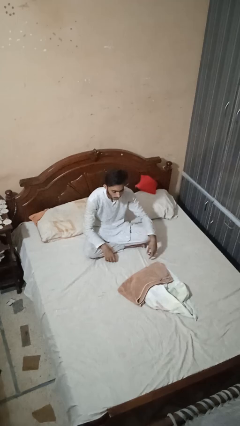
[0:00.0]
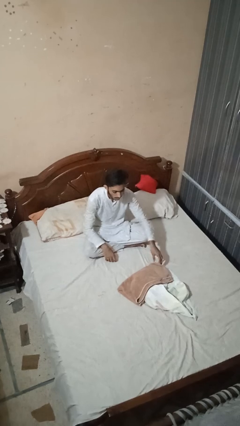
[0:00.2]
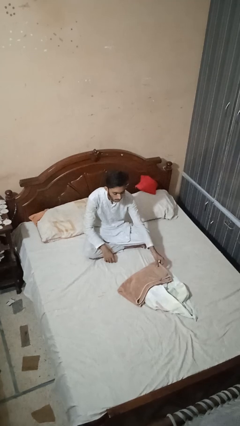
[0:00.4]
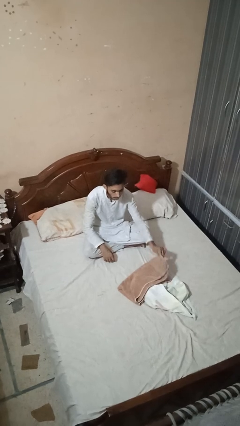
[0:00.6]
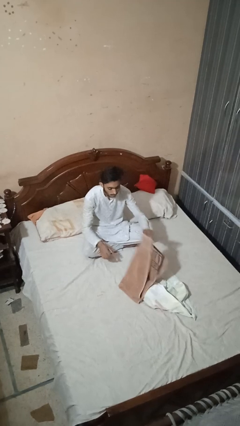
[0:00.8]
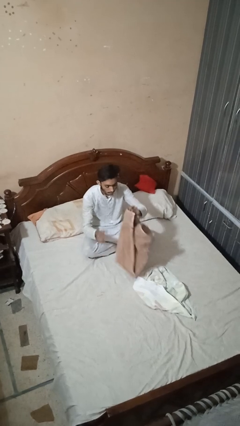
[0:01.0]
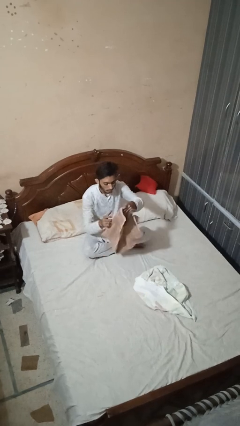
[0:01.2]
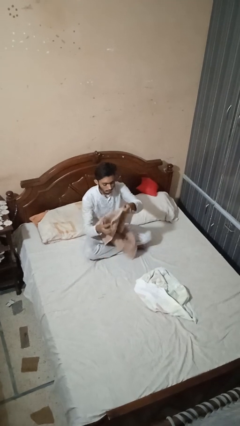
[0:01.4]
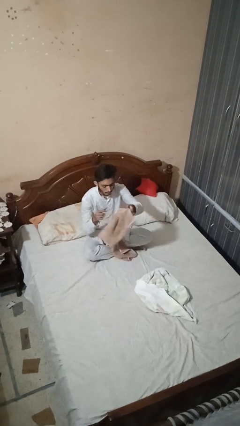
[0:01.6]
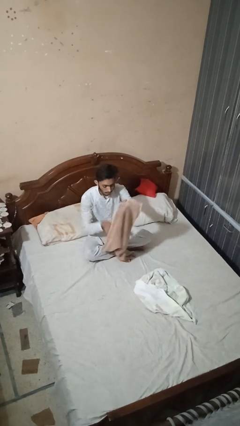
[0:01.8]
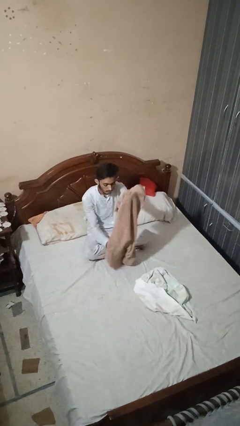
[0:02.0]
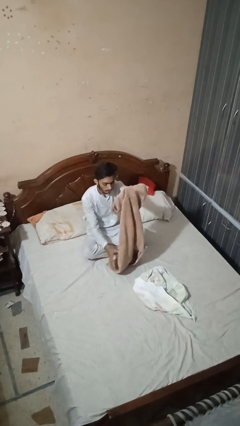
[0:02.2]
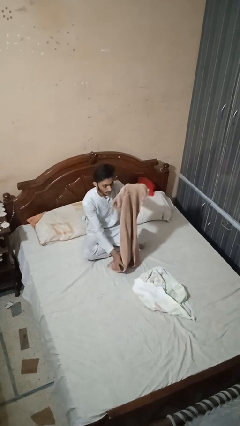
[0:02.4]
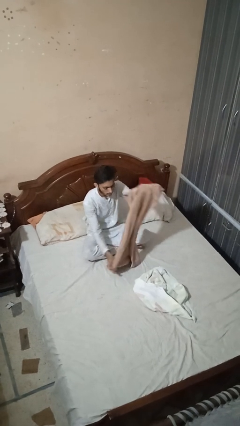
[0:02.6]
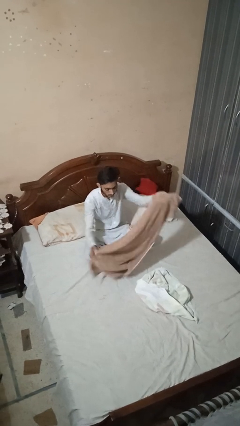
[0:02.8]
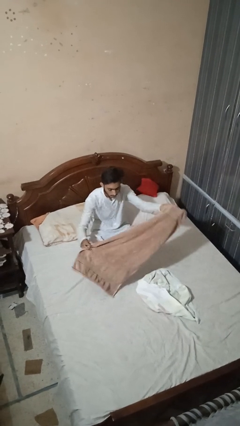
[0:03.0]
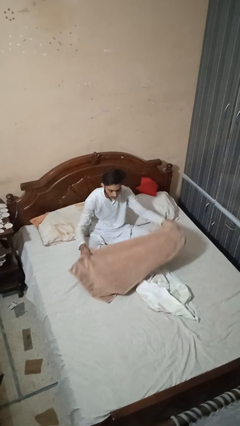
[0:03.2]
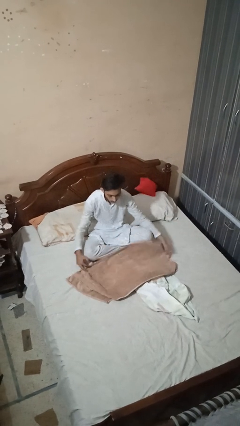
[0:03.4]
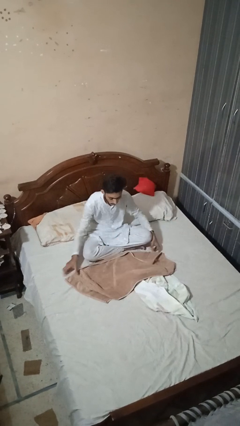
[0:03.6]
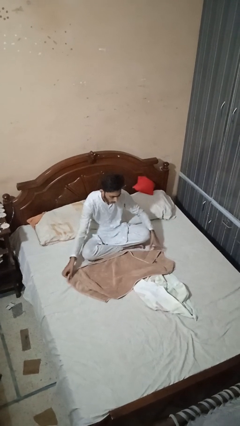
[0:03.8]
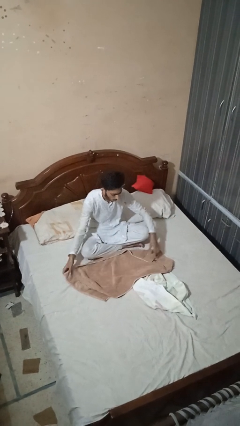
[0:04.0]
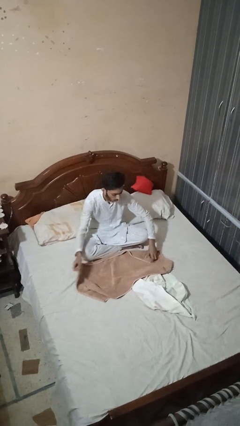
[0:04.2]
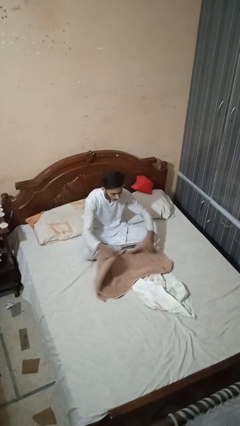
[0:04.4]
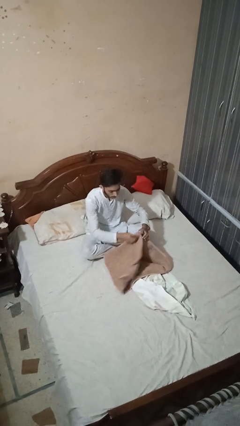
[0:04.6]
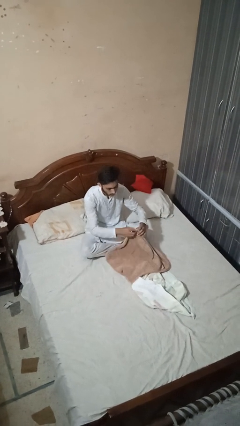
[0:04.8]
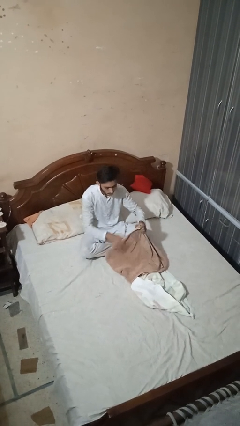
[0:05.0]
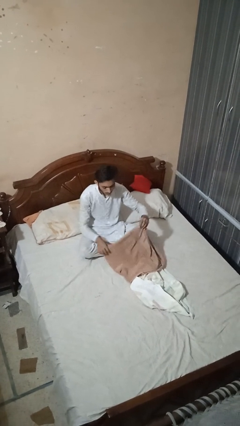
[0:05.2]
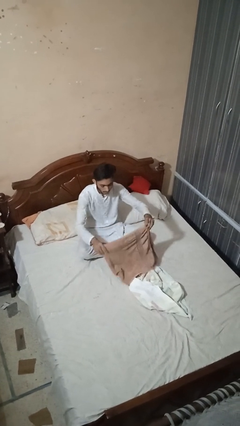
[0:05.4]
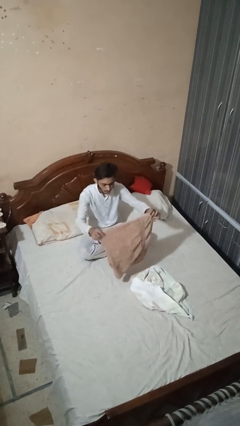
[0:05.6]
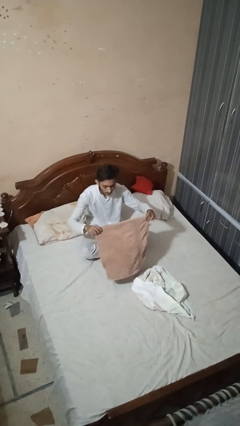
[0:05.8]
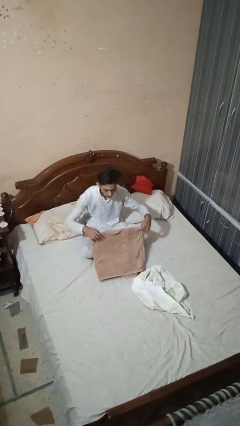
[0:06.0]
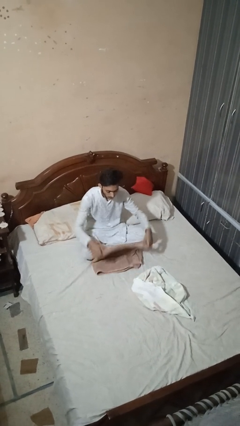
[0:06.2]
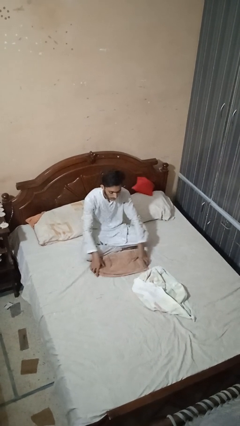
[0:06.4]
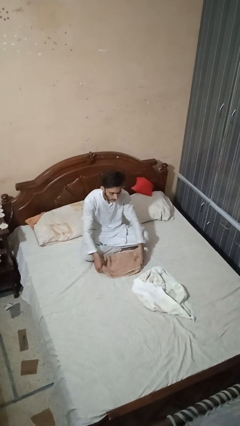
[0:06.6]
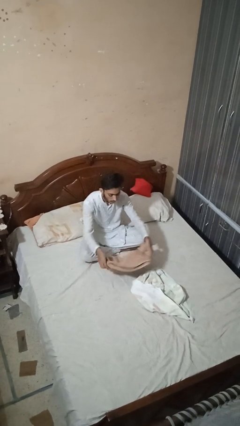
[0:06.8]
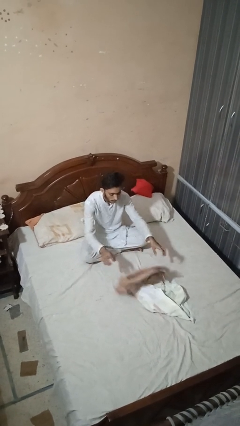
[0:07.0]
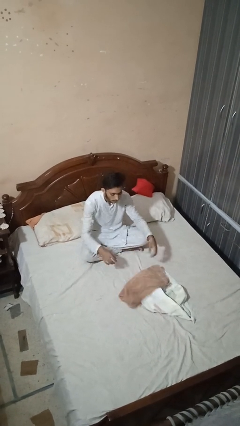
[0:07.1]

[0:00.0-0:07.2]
person folds towel

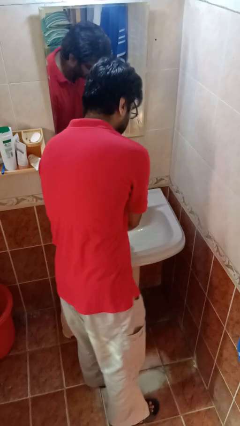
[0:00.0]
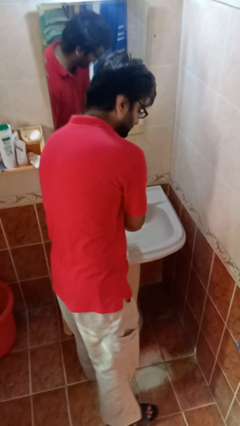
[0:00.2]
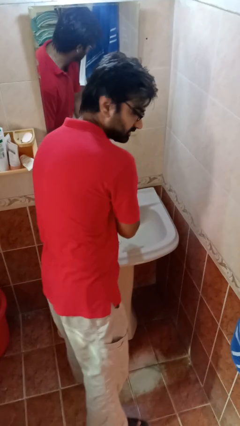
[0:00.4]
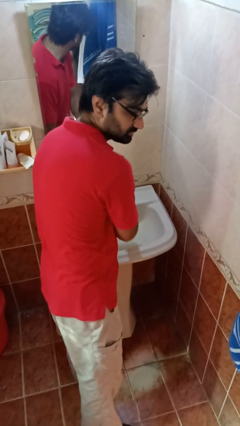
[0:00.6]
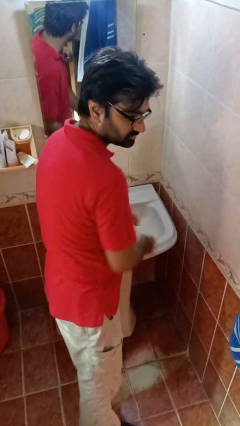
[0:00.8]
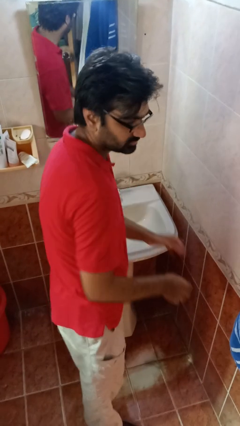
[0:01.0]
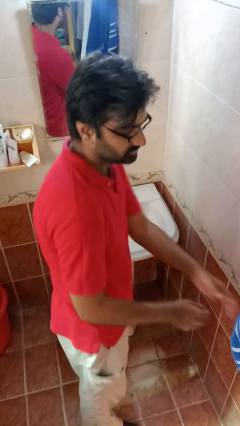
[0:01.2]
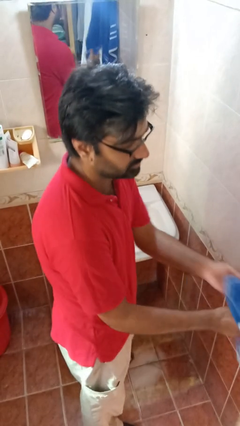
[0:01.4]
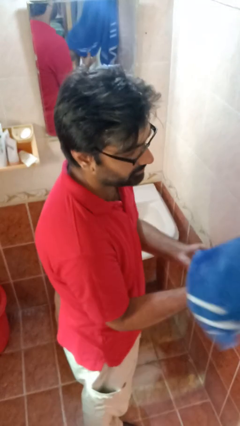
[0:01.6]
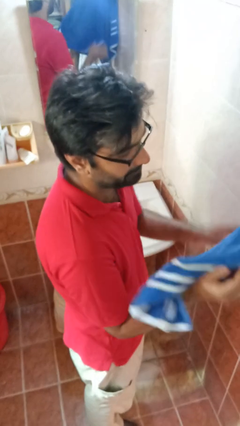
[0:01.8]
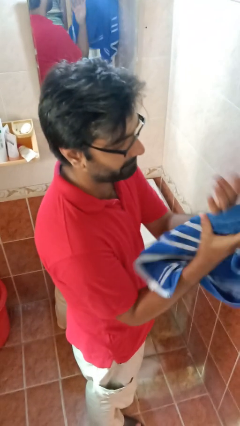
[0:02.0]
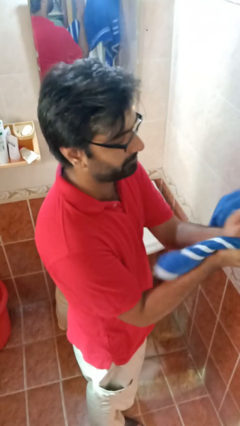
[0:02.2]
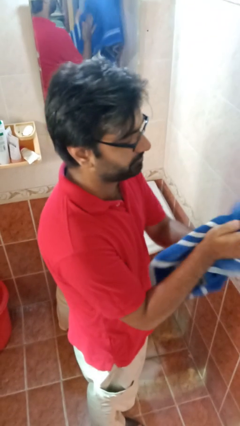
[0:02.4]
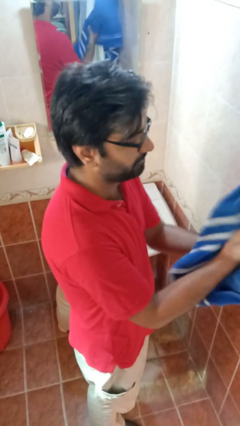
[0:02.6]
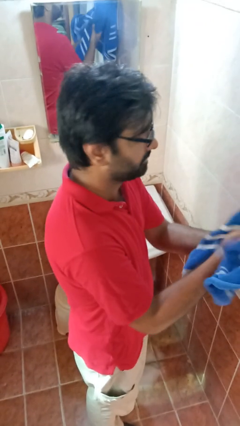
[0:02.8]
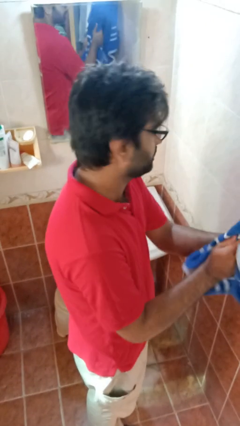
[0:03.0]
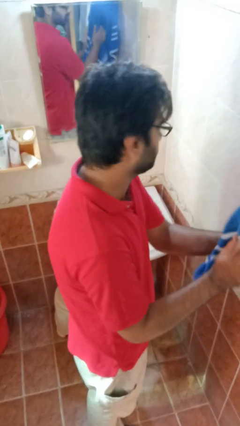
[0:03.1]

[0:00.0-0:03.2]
person dries hands with towel

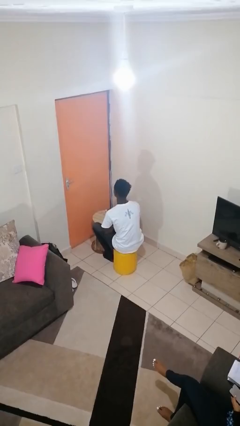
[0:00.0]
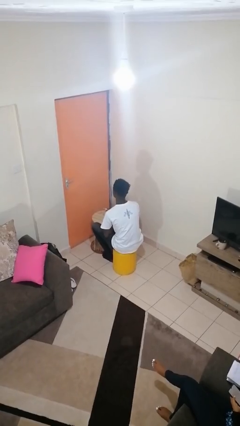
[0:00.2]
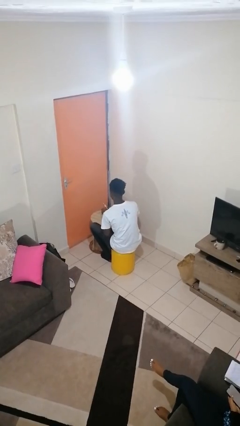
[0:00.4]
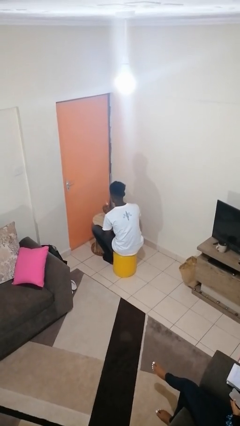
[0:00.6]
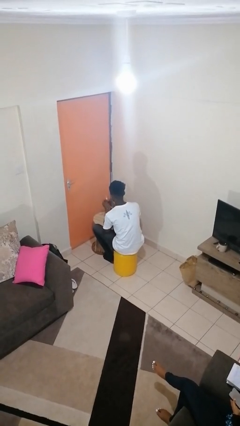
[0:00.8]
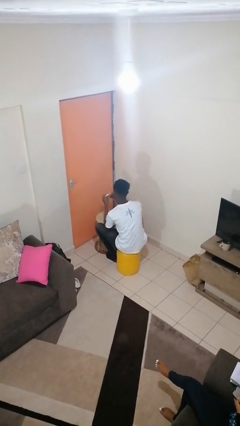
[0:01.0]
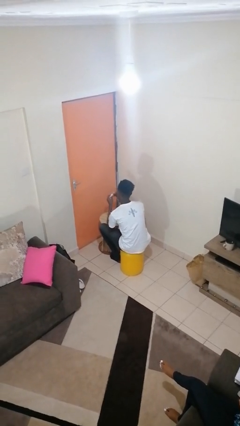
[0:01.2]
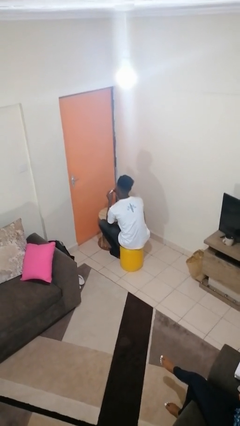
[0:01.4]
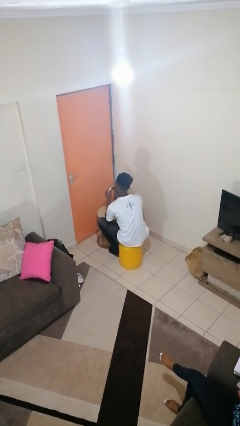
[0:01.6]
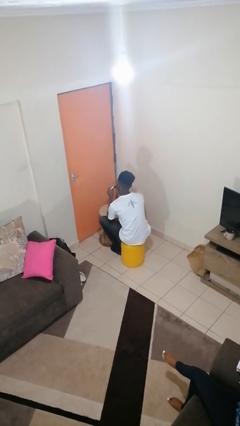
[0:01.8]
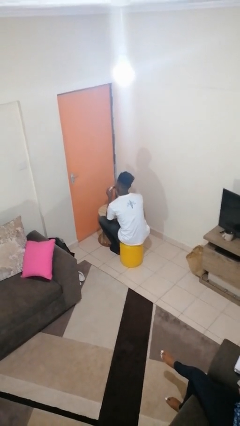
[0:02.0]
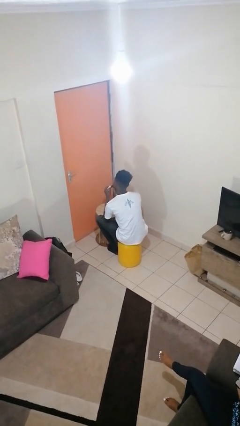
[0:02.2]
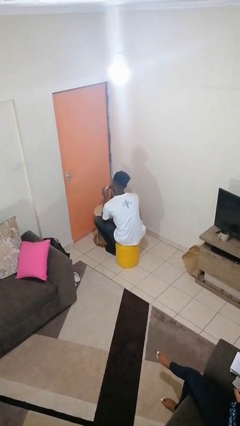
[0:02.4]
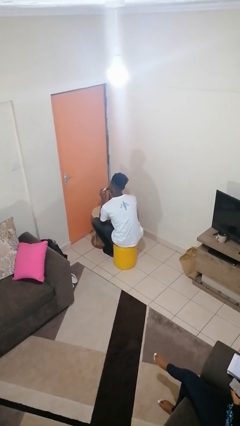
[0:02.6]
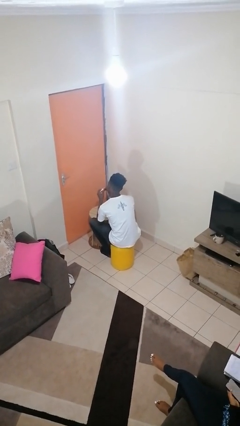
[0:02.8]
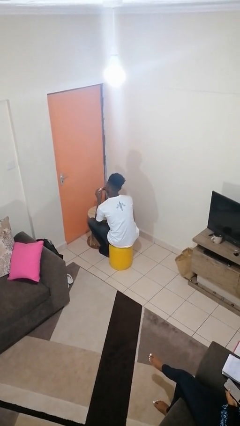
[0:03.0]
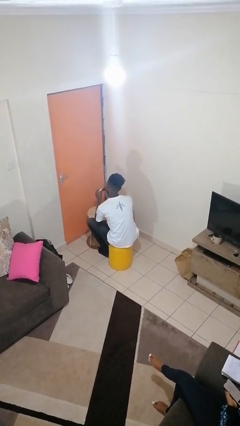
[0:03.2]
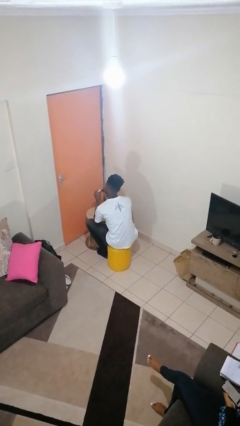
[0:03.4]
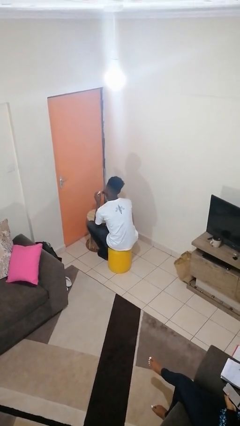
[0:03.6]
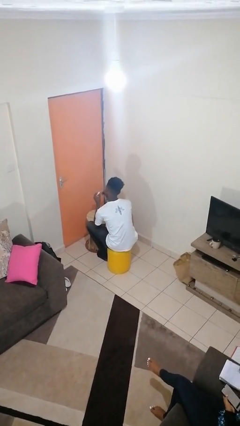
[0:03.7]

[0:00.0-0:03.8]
person paints fingernails

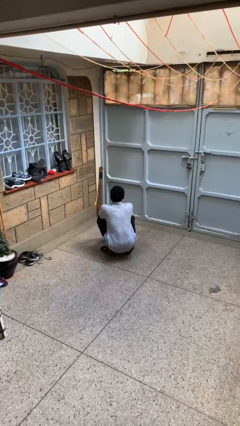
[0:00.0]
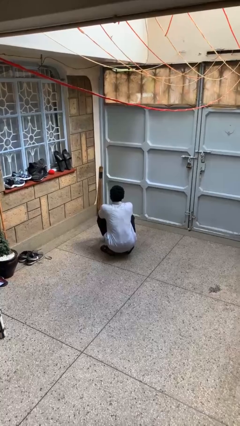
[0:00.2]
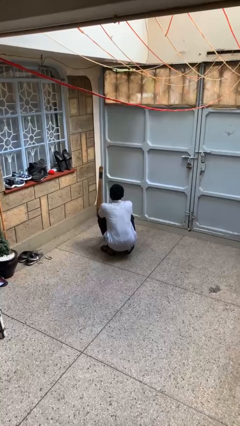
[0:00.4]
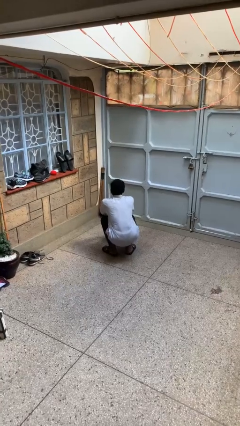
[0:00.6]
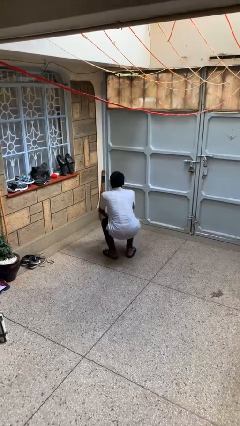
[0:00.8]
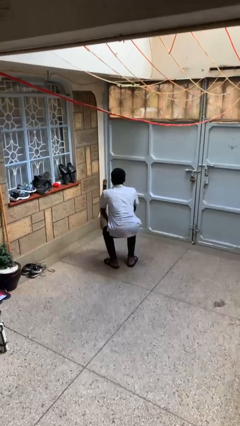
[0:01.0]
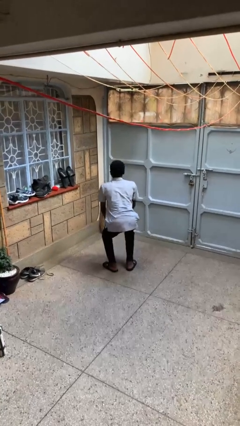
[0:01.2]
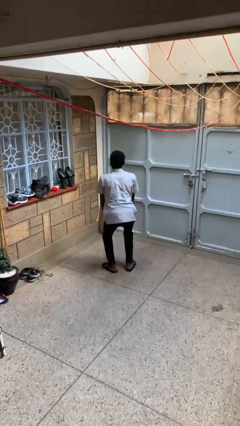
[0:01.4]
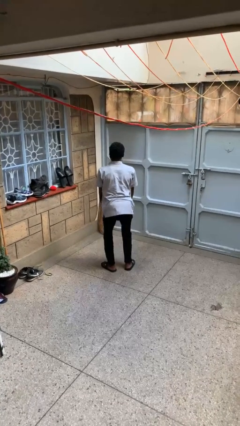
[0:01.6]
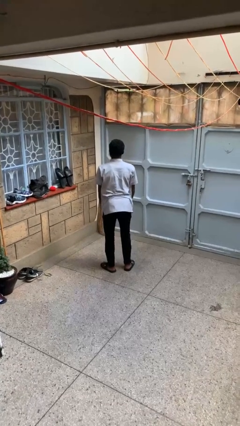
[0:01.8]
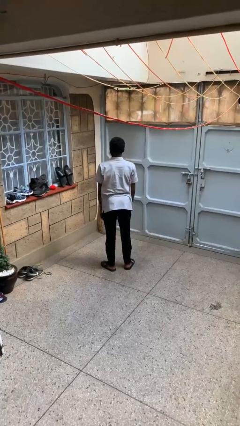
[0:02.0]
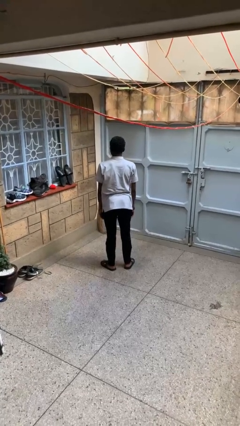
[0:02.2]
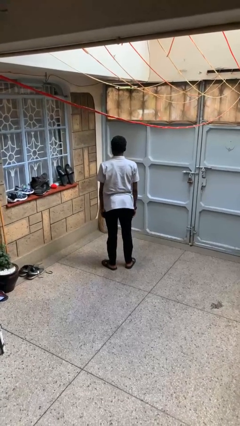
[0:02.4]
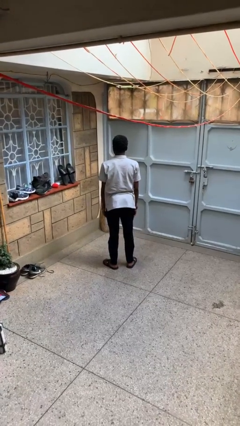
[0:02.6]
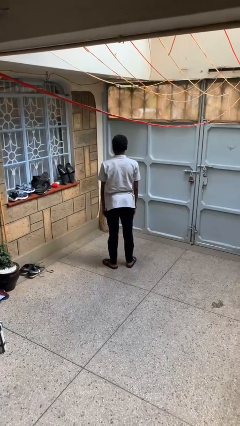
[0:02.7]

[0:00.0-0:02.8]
person stands up

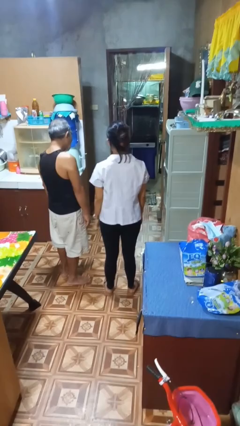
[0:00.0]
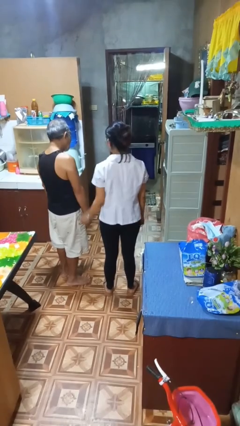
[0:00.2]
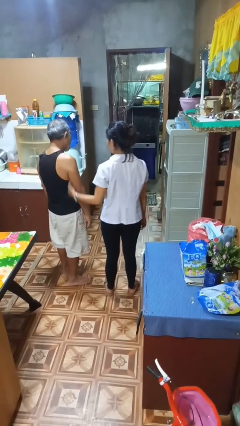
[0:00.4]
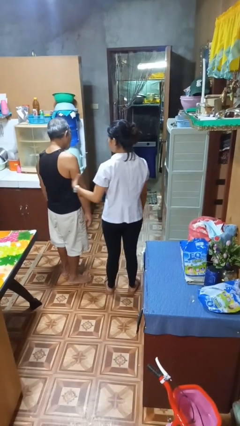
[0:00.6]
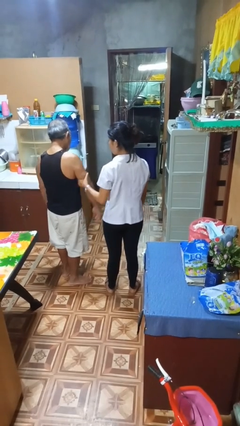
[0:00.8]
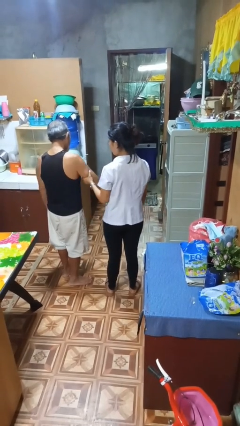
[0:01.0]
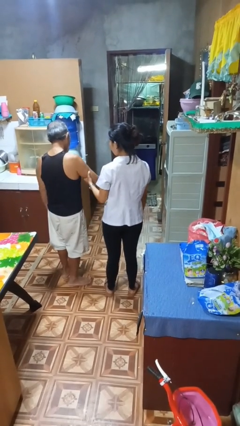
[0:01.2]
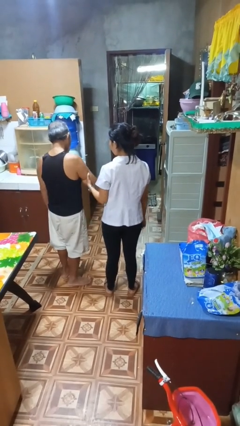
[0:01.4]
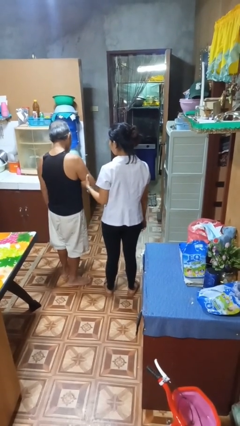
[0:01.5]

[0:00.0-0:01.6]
person grabs person by bicep
